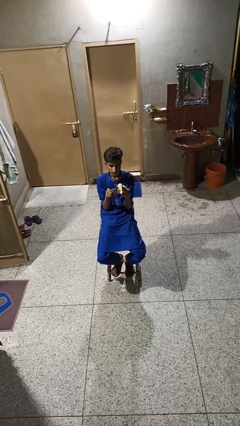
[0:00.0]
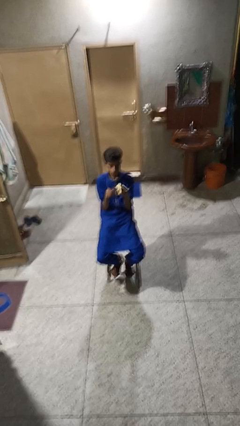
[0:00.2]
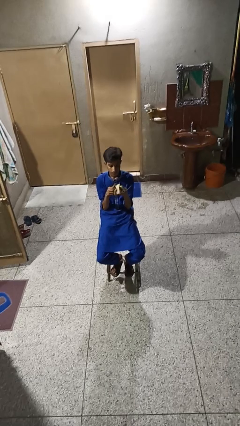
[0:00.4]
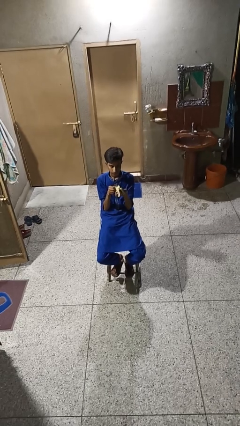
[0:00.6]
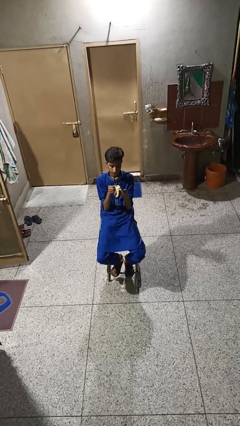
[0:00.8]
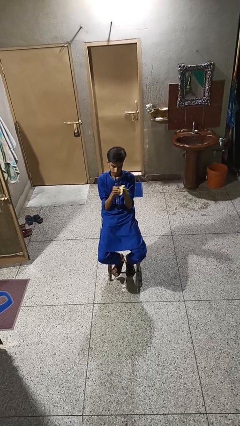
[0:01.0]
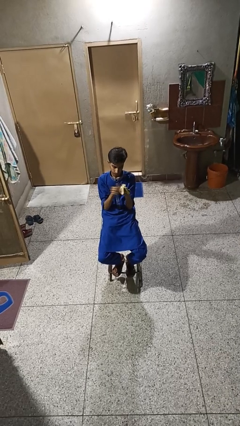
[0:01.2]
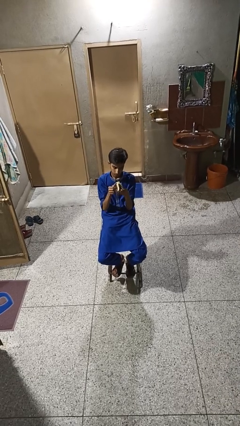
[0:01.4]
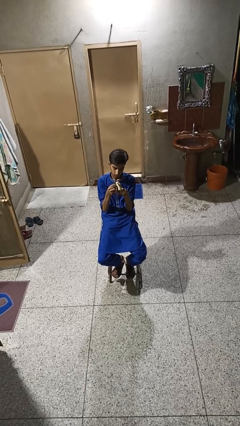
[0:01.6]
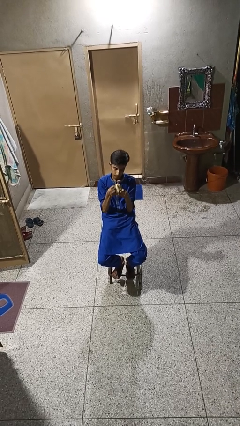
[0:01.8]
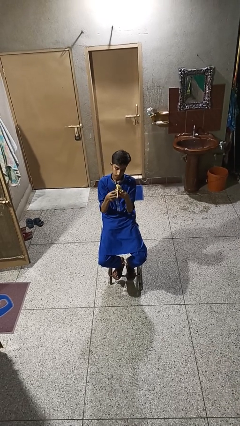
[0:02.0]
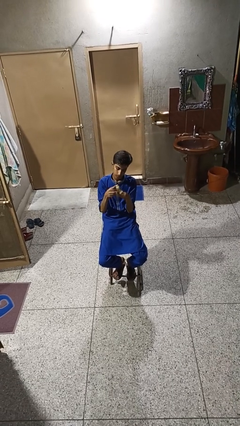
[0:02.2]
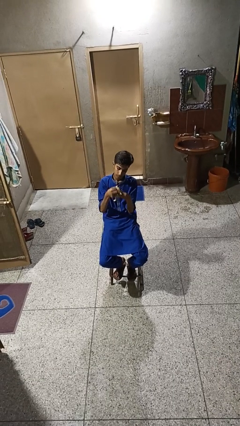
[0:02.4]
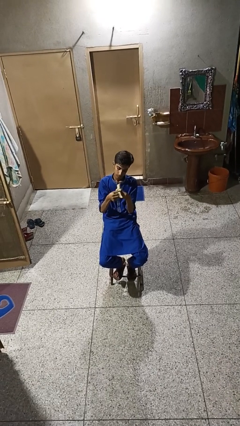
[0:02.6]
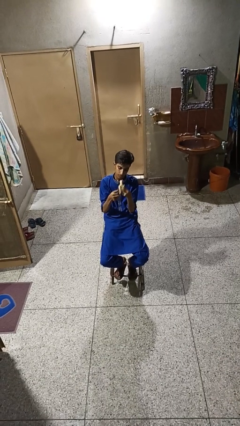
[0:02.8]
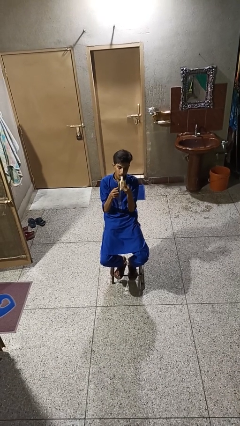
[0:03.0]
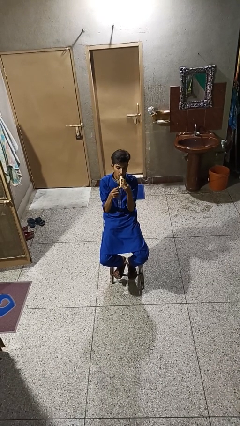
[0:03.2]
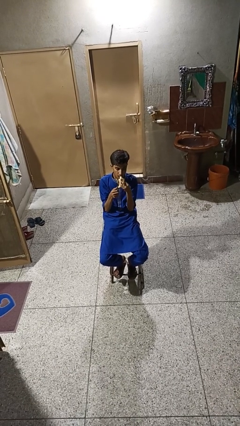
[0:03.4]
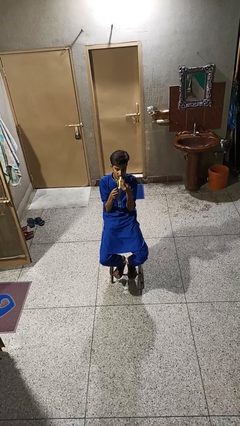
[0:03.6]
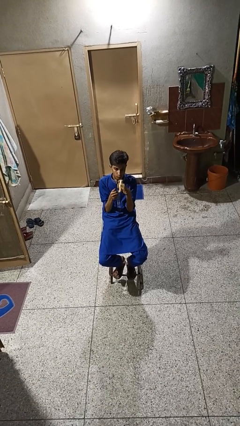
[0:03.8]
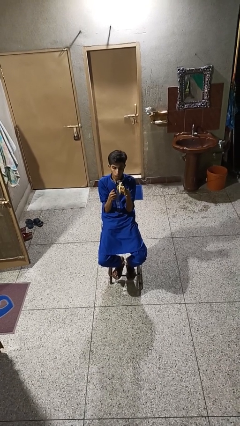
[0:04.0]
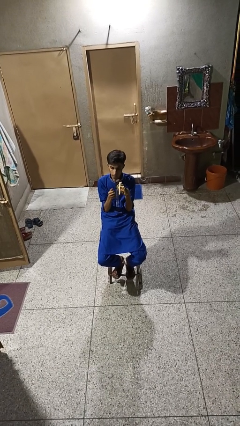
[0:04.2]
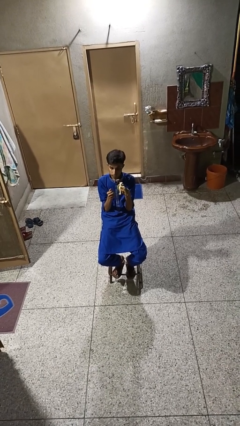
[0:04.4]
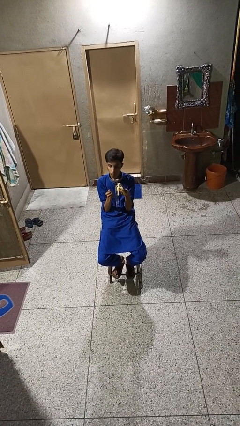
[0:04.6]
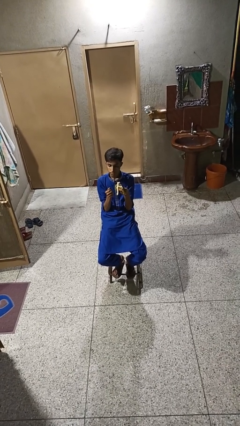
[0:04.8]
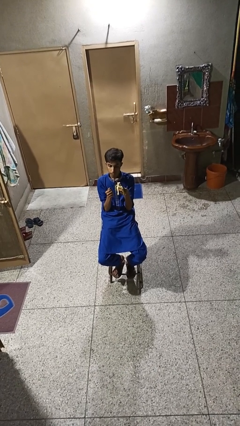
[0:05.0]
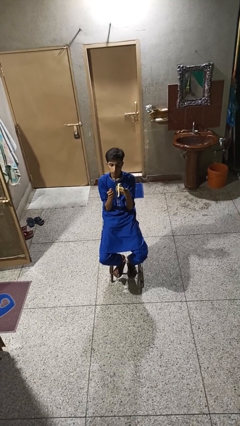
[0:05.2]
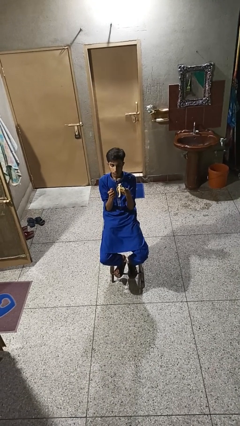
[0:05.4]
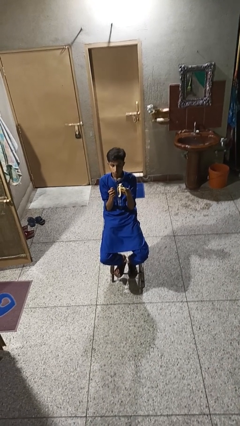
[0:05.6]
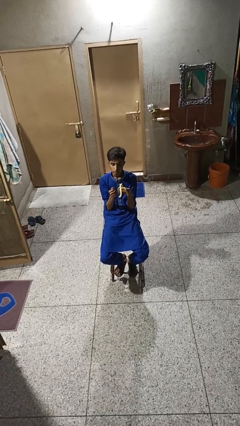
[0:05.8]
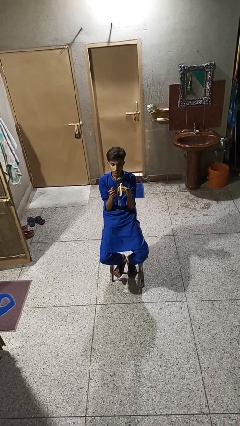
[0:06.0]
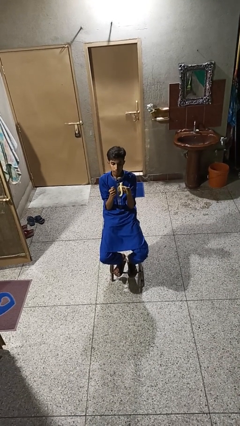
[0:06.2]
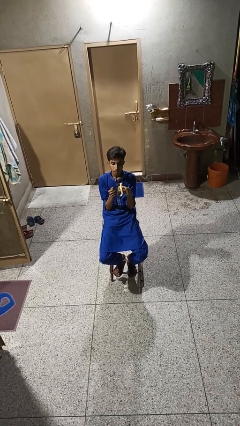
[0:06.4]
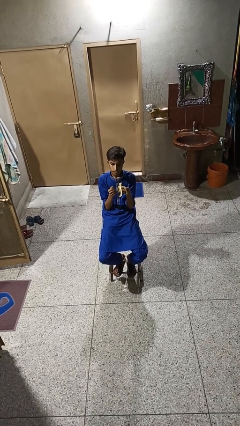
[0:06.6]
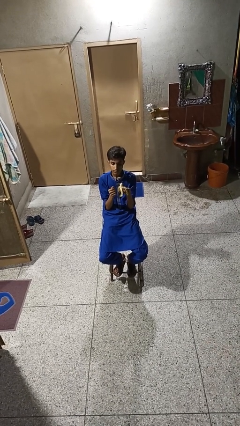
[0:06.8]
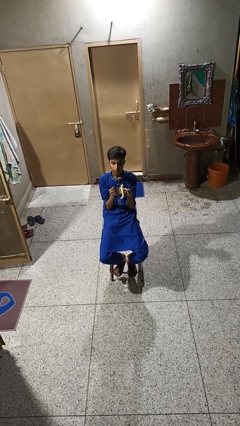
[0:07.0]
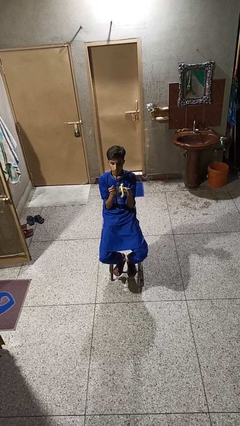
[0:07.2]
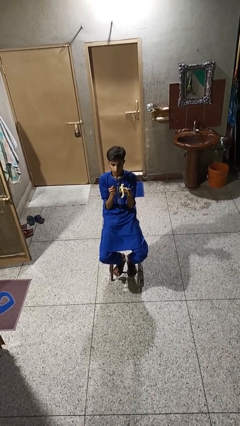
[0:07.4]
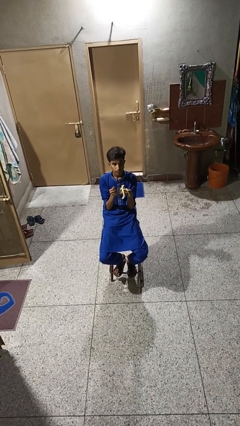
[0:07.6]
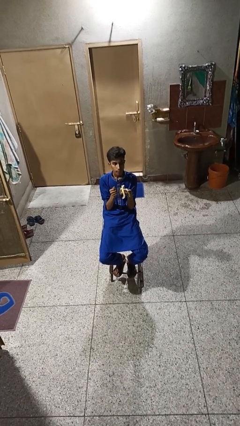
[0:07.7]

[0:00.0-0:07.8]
person eats banana

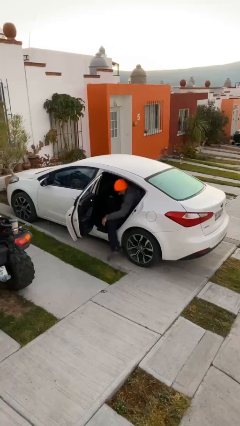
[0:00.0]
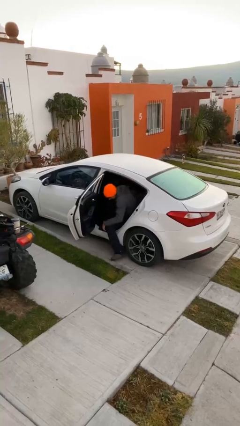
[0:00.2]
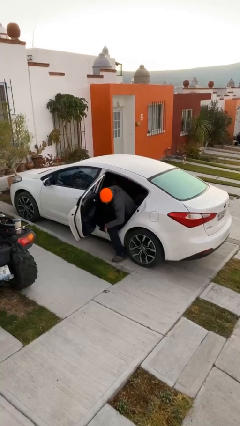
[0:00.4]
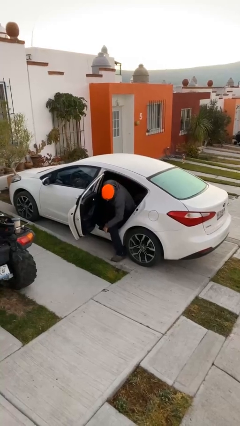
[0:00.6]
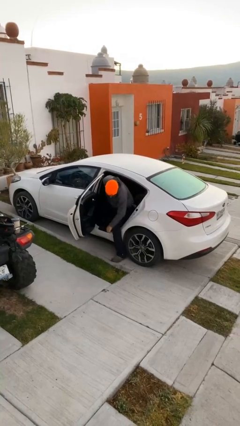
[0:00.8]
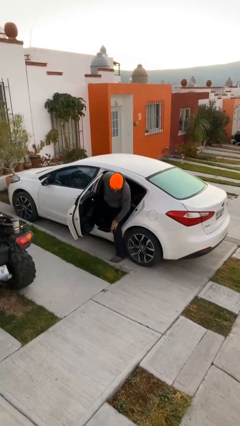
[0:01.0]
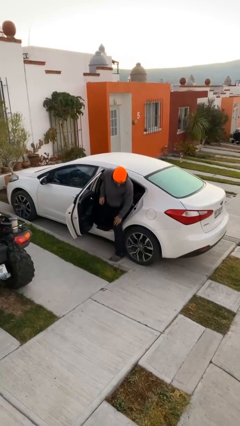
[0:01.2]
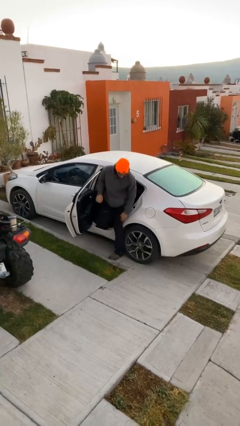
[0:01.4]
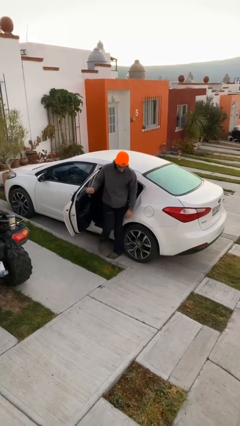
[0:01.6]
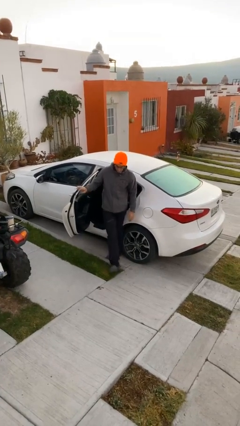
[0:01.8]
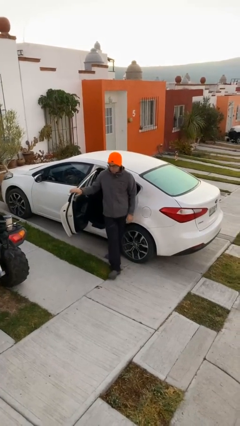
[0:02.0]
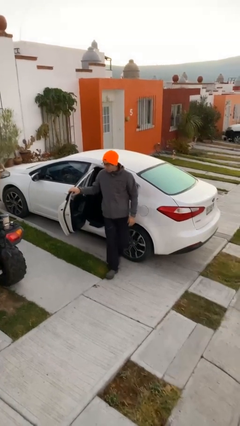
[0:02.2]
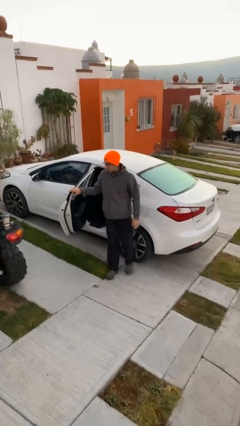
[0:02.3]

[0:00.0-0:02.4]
person exits car

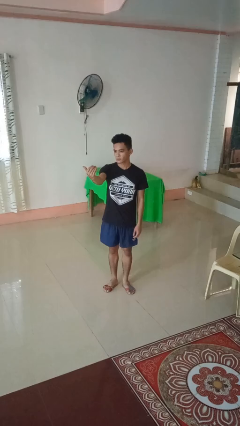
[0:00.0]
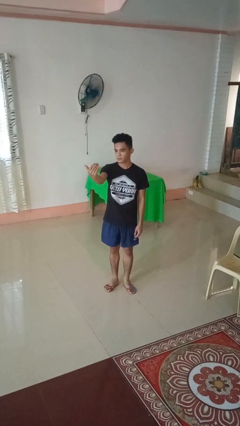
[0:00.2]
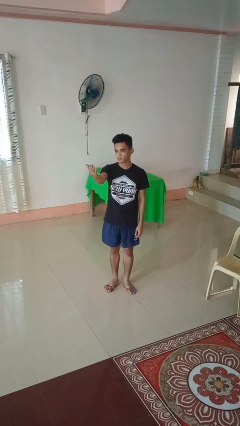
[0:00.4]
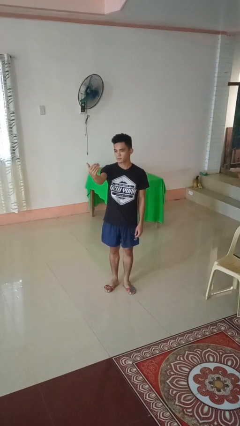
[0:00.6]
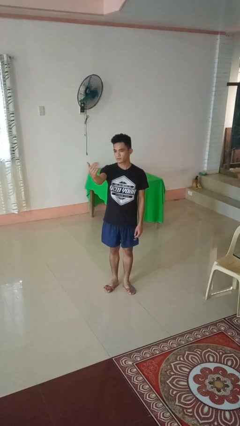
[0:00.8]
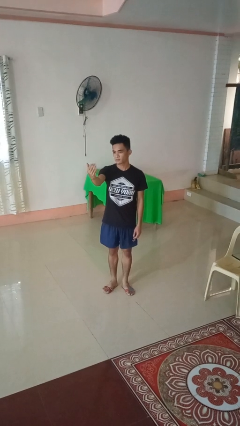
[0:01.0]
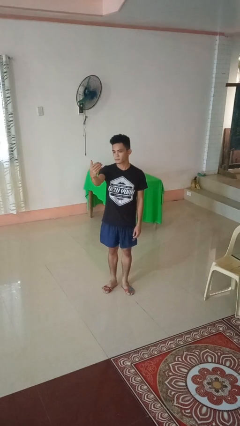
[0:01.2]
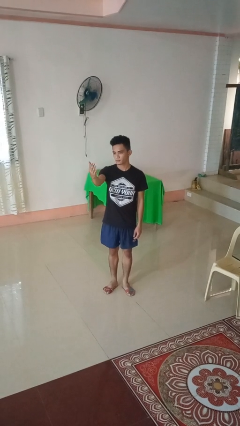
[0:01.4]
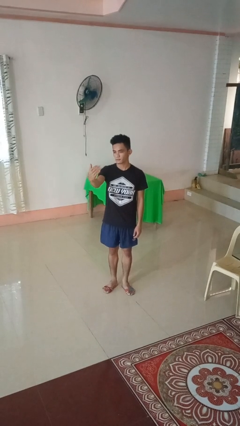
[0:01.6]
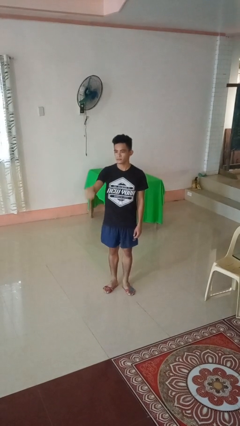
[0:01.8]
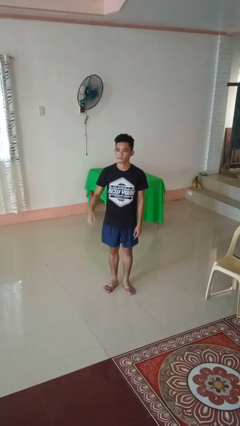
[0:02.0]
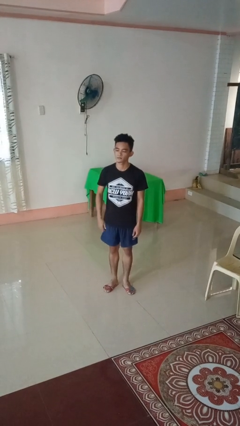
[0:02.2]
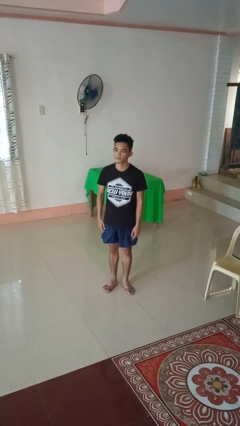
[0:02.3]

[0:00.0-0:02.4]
person gestures come here

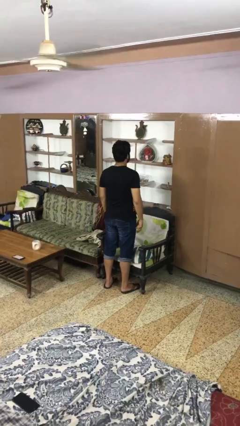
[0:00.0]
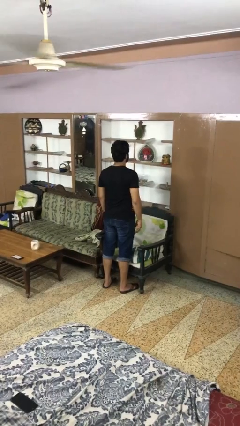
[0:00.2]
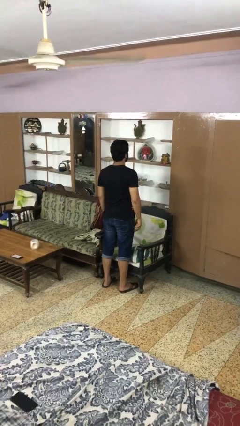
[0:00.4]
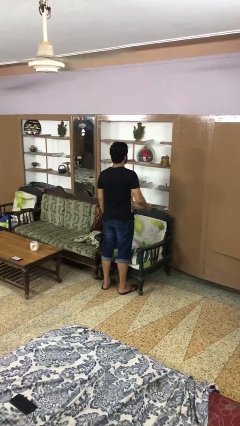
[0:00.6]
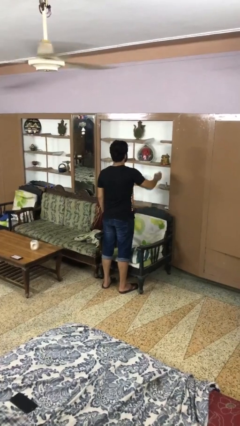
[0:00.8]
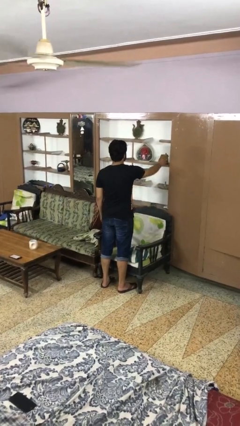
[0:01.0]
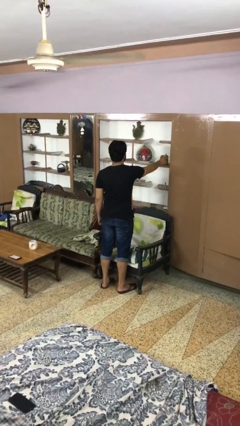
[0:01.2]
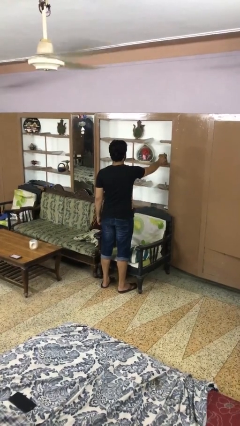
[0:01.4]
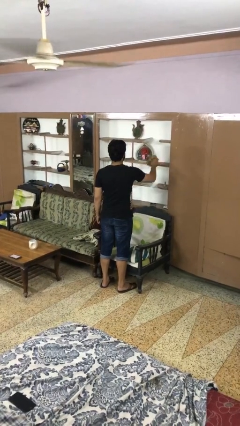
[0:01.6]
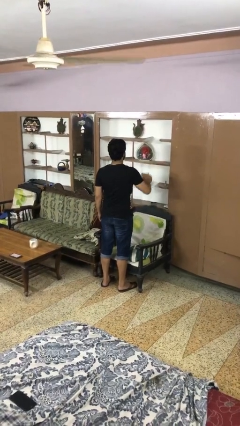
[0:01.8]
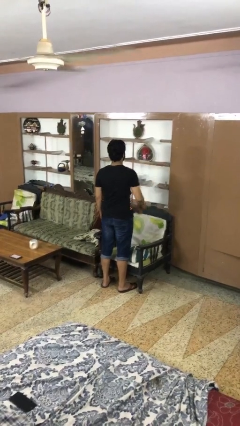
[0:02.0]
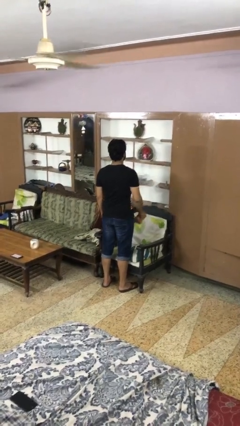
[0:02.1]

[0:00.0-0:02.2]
person picks up object from shelf

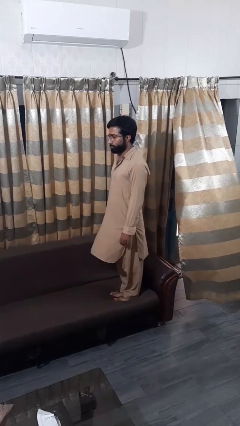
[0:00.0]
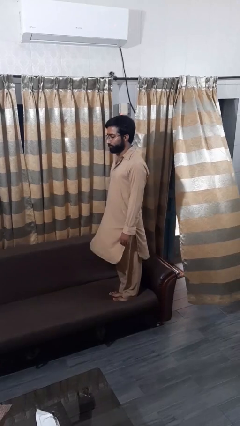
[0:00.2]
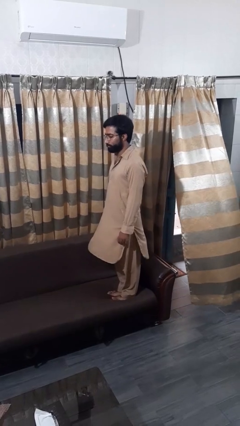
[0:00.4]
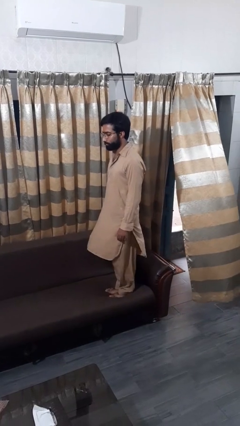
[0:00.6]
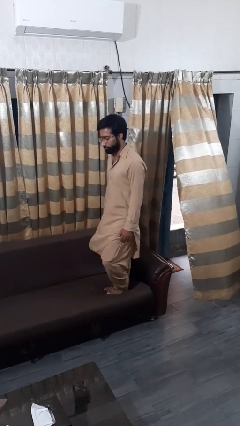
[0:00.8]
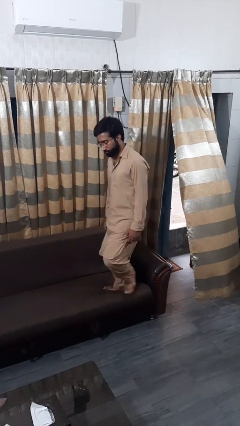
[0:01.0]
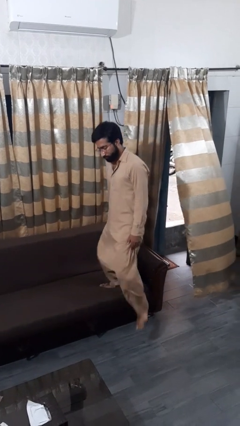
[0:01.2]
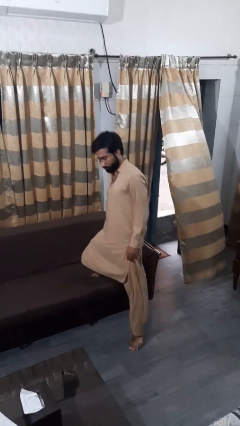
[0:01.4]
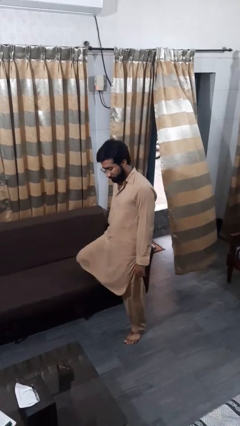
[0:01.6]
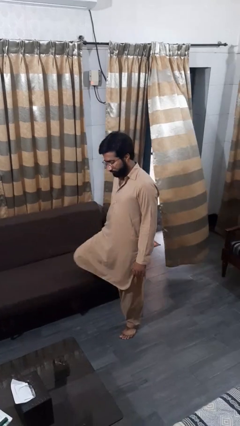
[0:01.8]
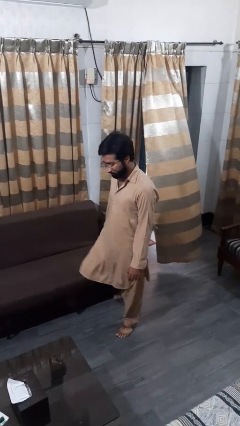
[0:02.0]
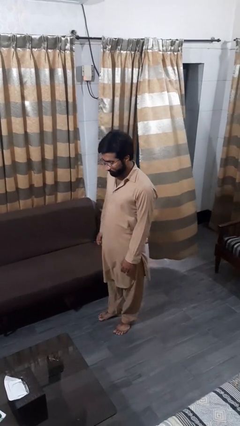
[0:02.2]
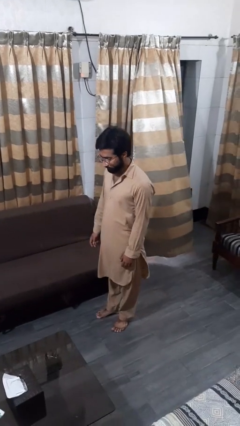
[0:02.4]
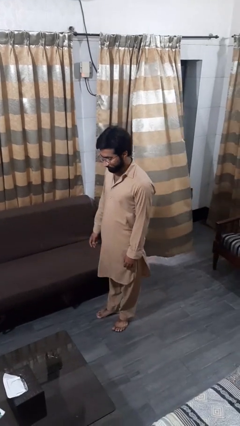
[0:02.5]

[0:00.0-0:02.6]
person climbs off couch

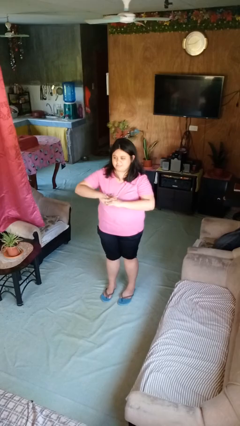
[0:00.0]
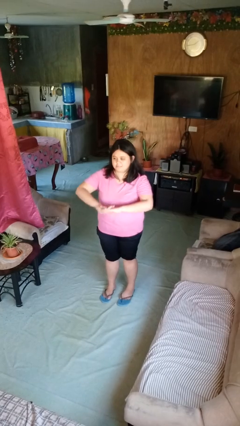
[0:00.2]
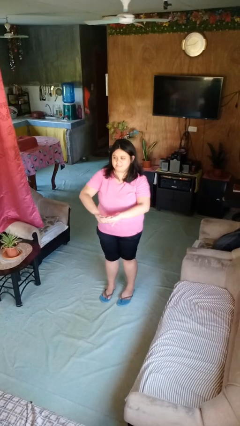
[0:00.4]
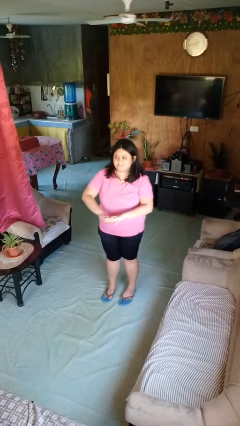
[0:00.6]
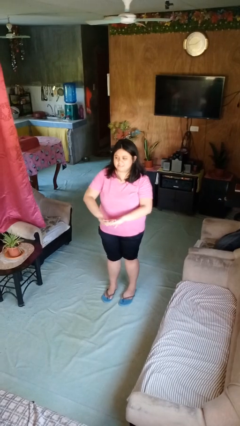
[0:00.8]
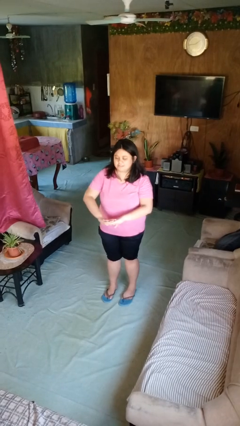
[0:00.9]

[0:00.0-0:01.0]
person cracks knuckles
